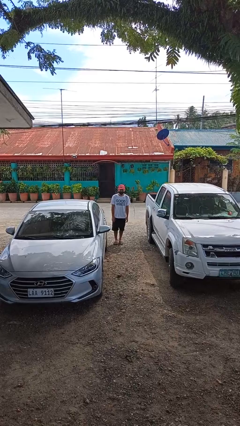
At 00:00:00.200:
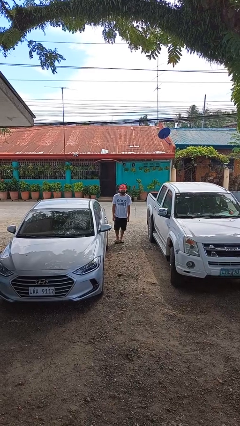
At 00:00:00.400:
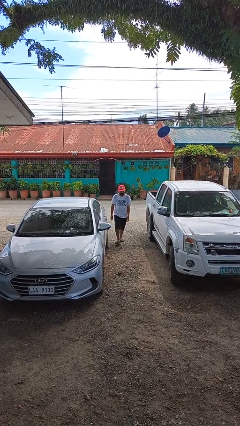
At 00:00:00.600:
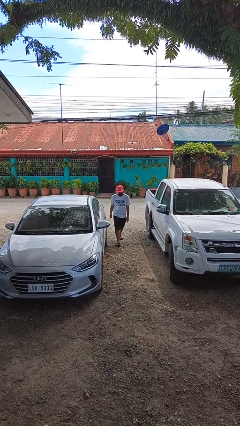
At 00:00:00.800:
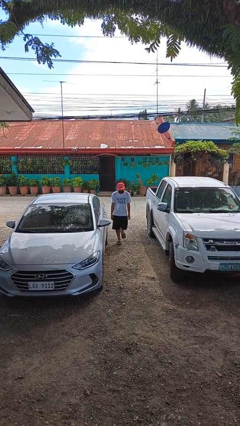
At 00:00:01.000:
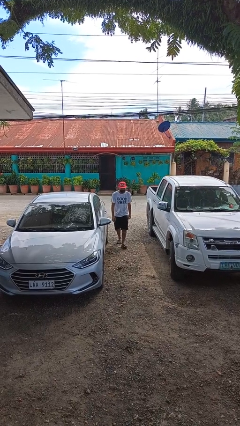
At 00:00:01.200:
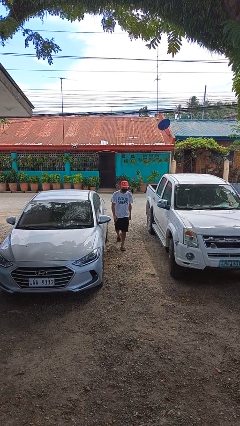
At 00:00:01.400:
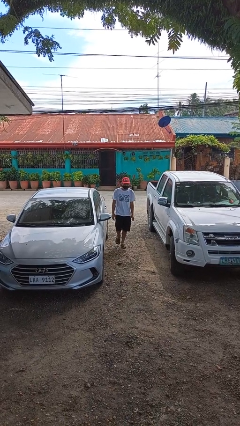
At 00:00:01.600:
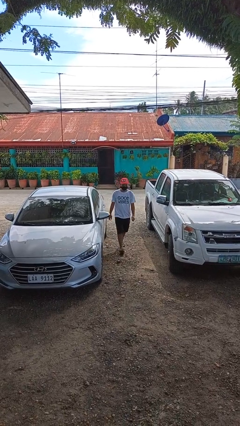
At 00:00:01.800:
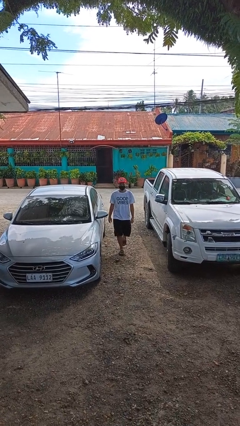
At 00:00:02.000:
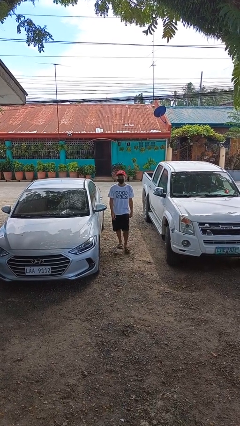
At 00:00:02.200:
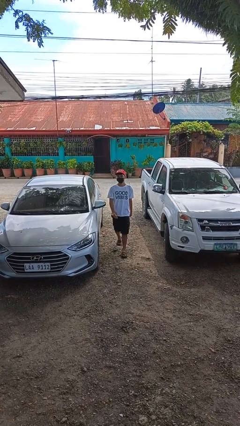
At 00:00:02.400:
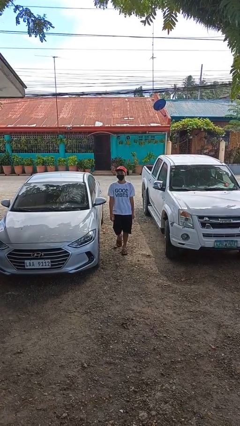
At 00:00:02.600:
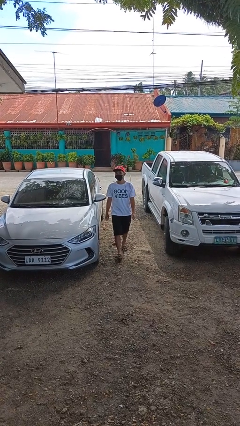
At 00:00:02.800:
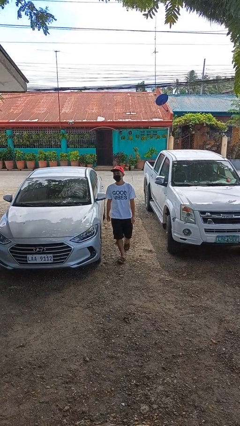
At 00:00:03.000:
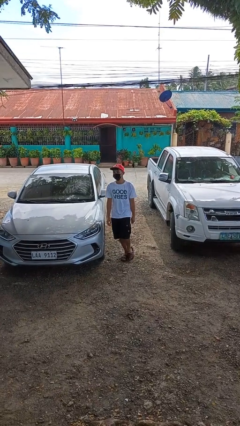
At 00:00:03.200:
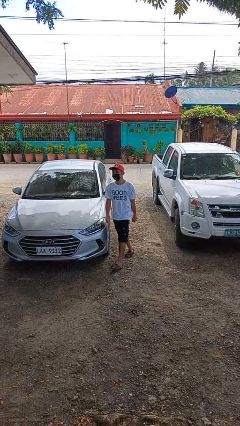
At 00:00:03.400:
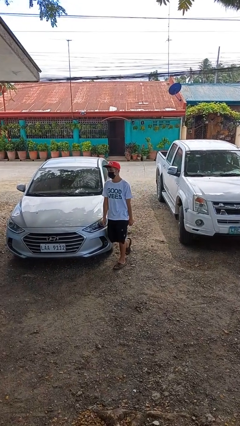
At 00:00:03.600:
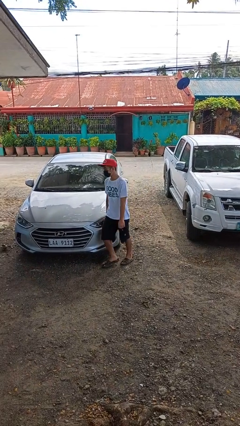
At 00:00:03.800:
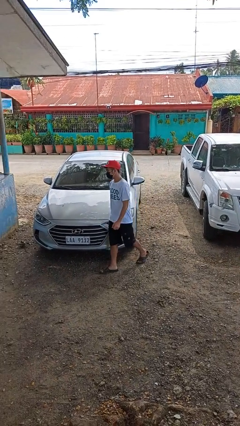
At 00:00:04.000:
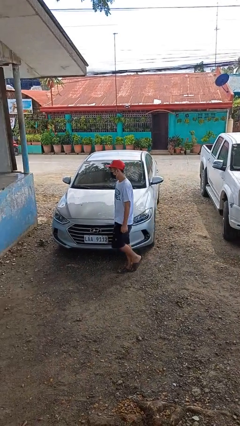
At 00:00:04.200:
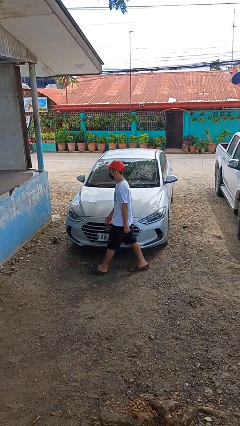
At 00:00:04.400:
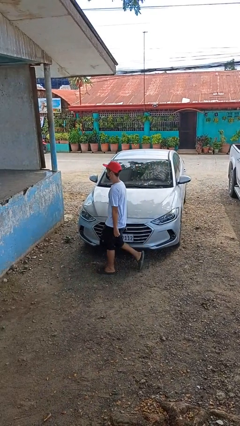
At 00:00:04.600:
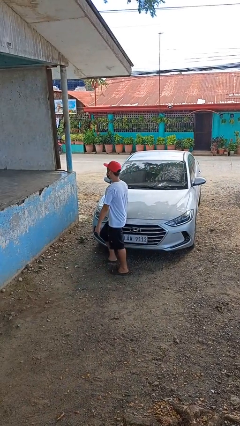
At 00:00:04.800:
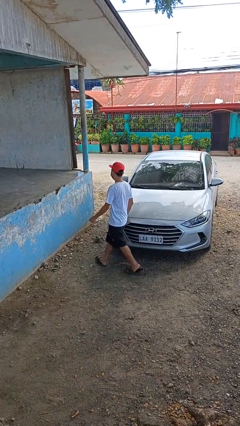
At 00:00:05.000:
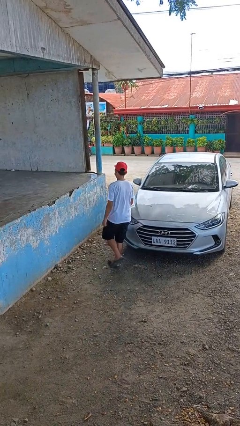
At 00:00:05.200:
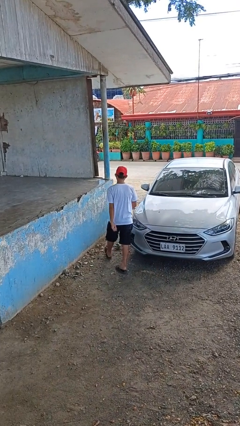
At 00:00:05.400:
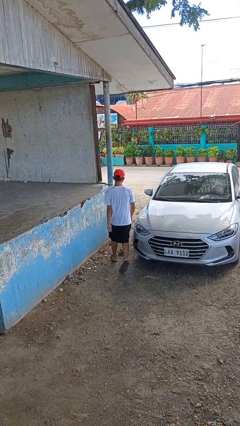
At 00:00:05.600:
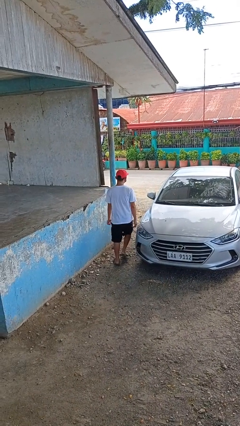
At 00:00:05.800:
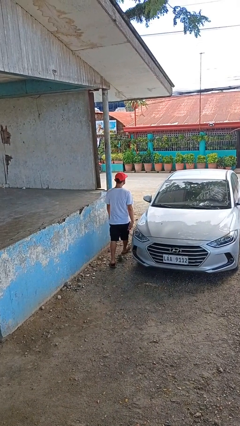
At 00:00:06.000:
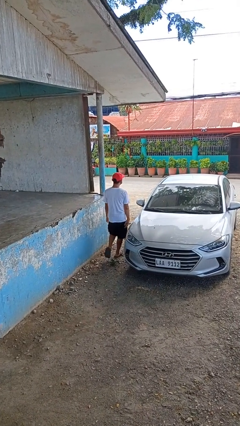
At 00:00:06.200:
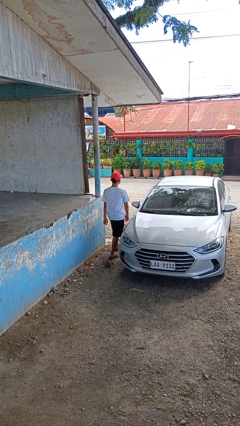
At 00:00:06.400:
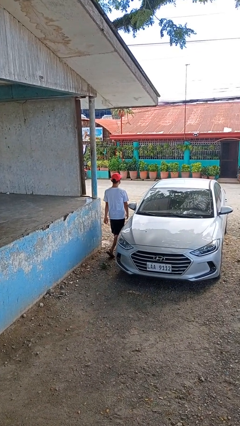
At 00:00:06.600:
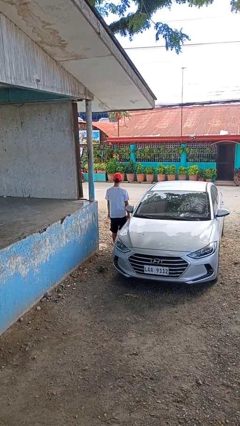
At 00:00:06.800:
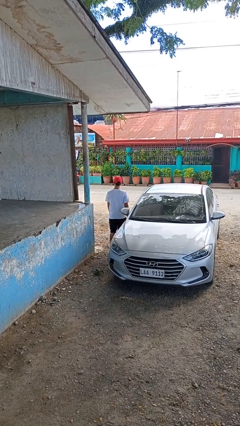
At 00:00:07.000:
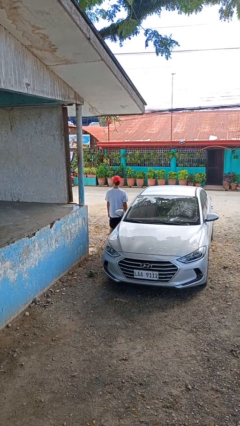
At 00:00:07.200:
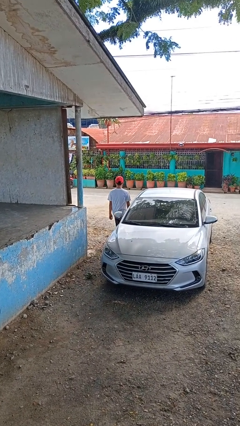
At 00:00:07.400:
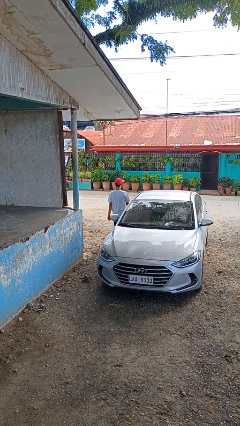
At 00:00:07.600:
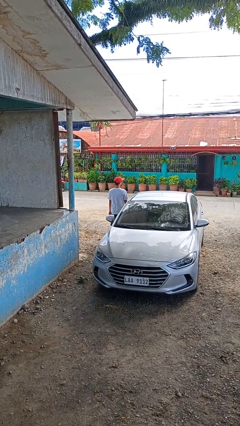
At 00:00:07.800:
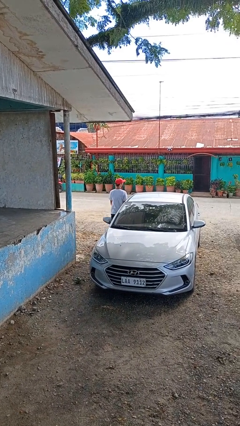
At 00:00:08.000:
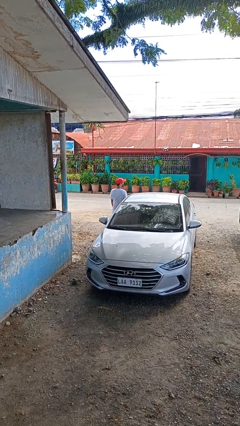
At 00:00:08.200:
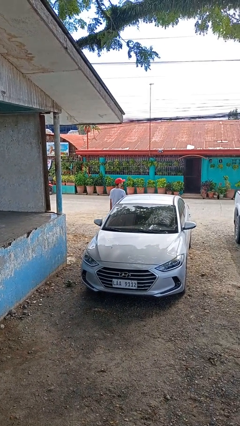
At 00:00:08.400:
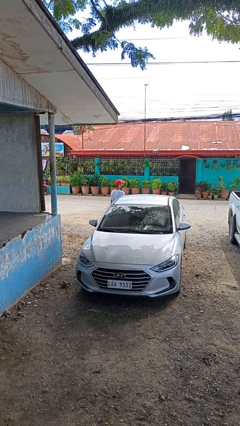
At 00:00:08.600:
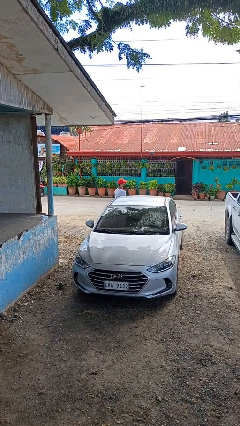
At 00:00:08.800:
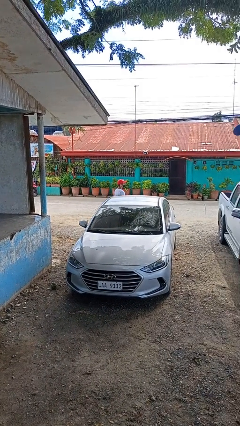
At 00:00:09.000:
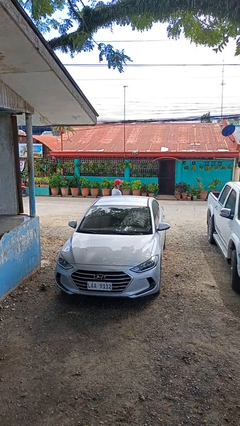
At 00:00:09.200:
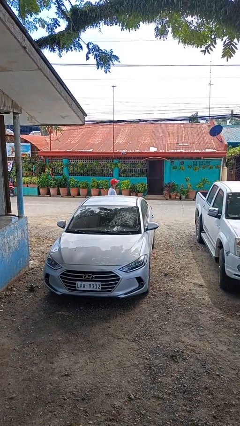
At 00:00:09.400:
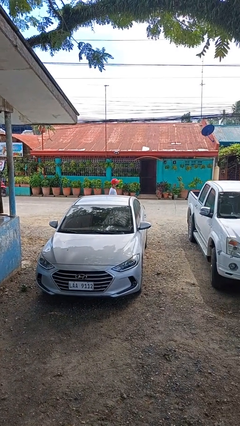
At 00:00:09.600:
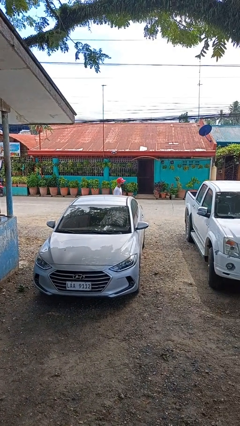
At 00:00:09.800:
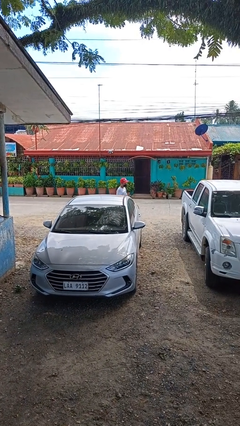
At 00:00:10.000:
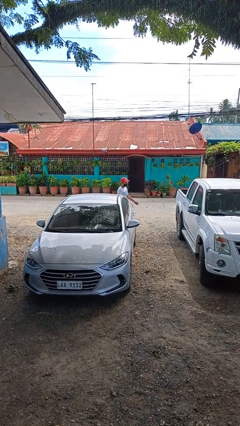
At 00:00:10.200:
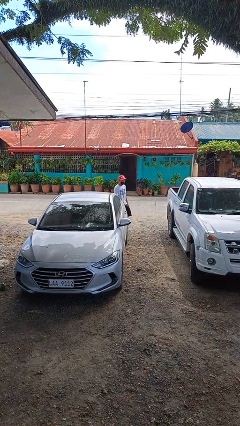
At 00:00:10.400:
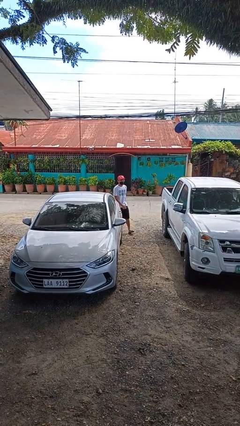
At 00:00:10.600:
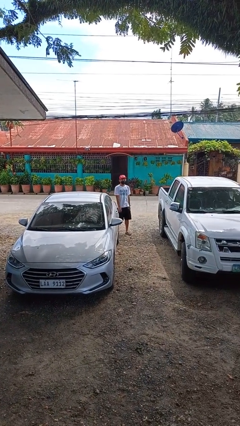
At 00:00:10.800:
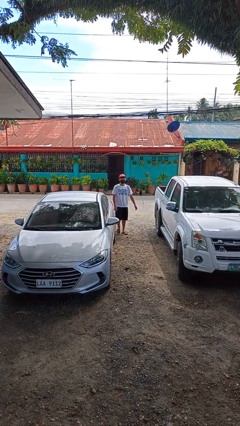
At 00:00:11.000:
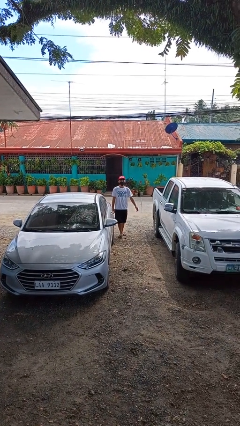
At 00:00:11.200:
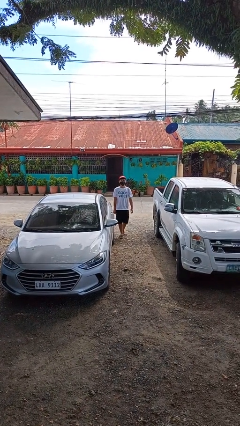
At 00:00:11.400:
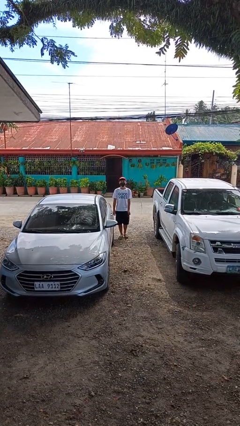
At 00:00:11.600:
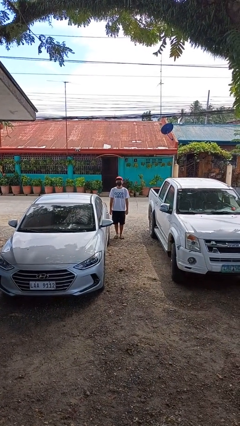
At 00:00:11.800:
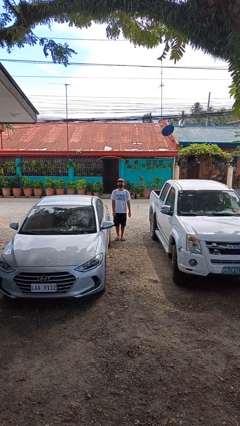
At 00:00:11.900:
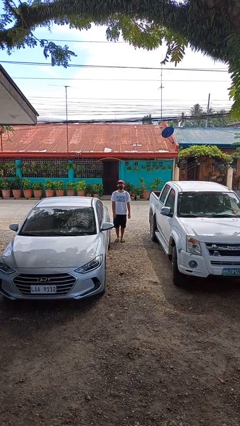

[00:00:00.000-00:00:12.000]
person walks around car

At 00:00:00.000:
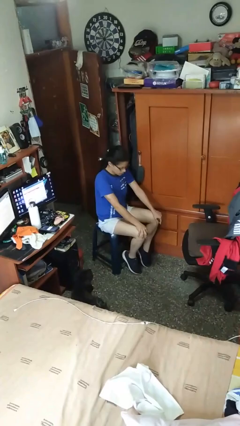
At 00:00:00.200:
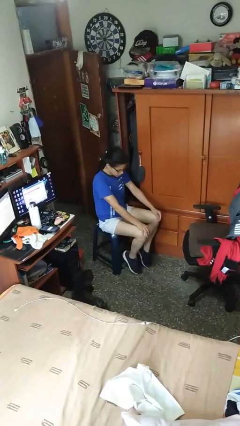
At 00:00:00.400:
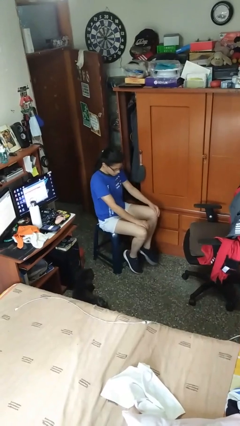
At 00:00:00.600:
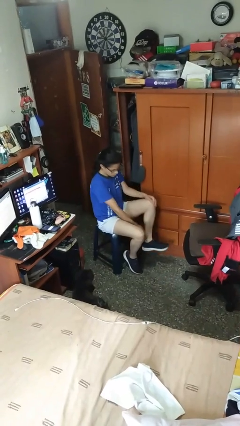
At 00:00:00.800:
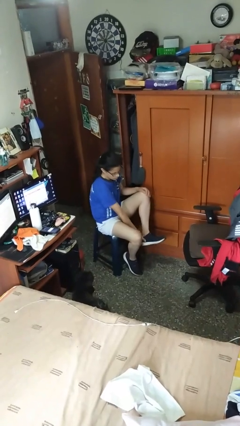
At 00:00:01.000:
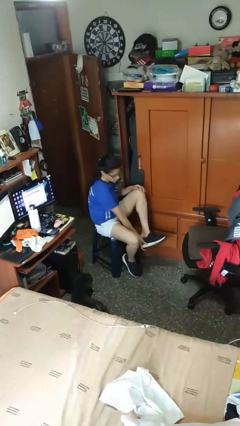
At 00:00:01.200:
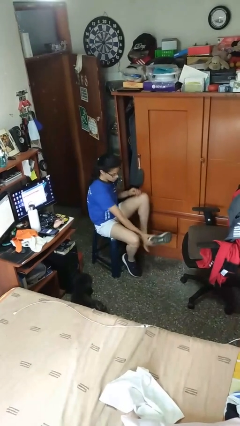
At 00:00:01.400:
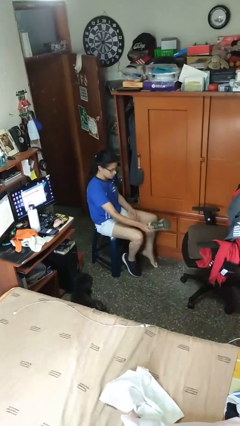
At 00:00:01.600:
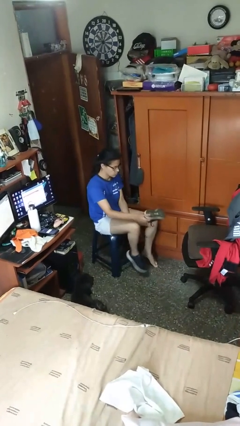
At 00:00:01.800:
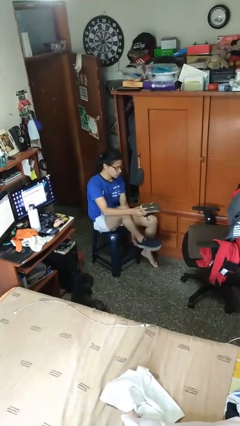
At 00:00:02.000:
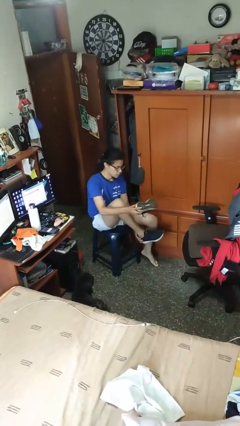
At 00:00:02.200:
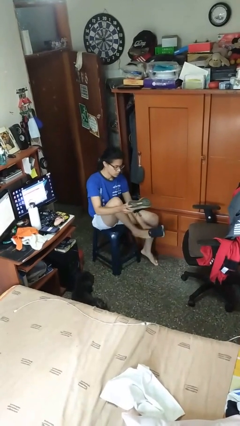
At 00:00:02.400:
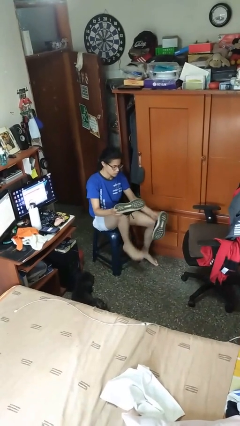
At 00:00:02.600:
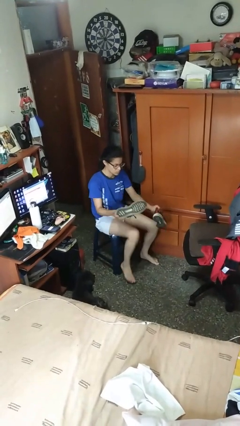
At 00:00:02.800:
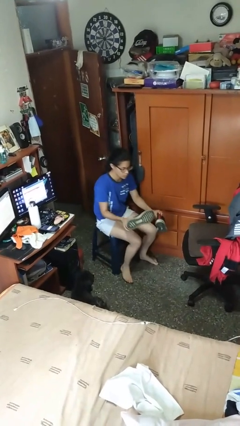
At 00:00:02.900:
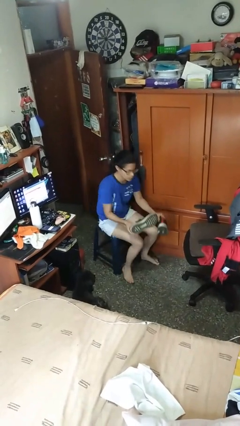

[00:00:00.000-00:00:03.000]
person takes off shoes

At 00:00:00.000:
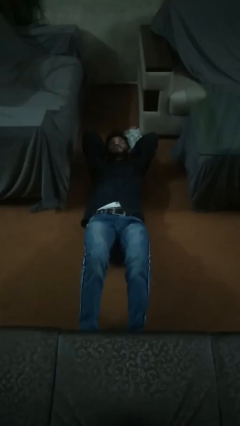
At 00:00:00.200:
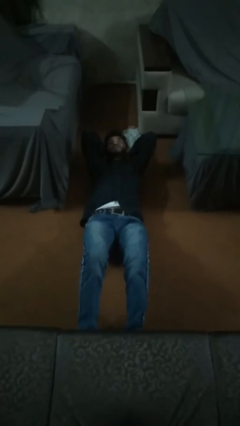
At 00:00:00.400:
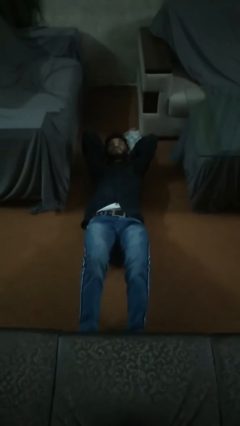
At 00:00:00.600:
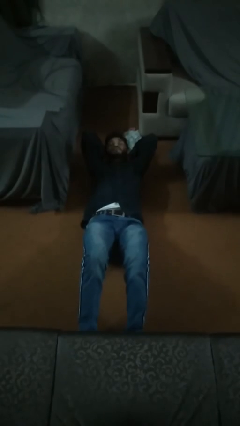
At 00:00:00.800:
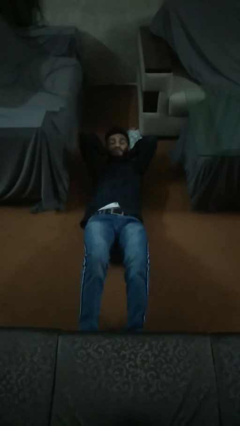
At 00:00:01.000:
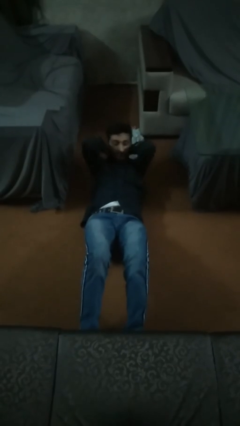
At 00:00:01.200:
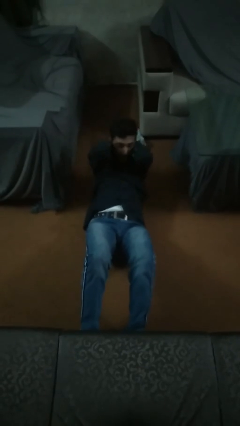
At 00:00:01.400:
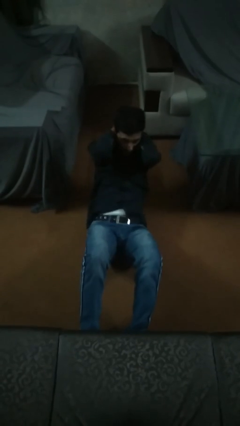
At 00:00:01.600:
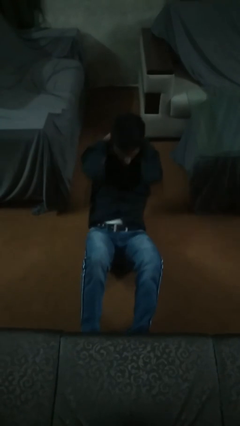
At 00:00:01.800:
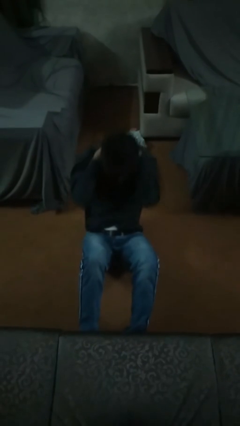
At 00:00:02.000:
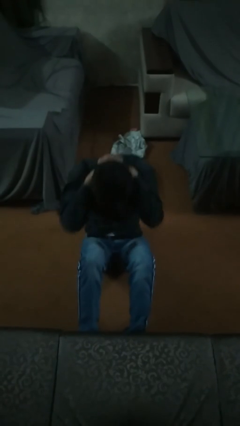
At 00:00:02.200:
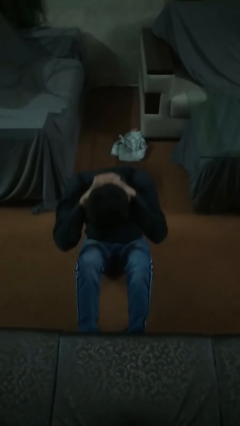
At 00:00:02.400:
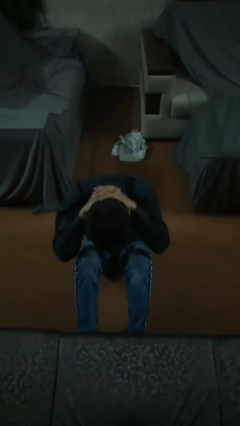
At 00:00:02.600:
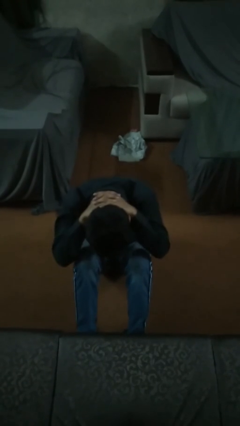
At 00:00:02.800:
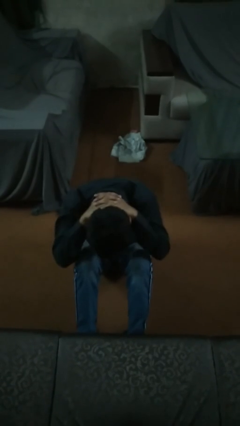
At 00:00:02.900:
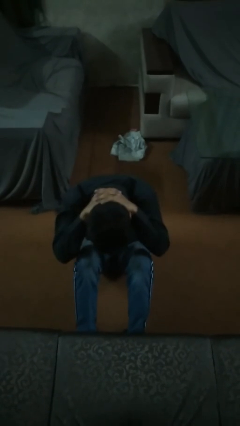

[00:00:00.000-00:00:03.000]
person exercises with situp
